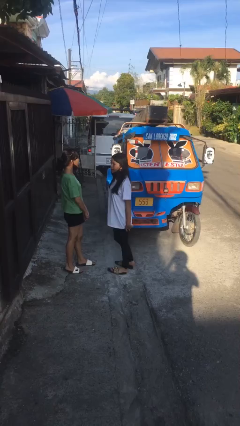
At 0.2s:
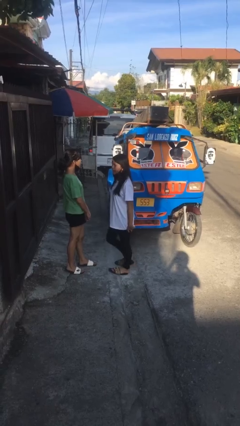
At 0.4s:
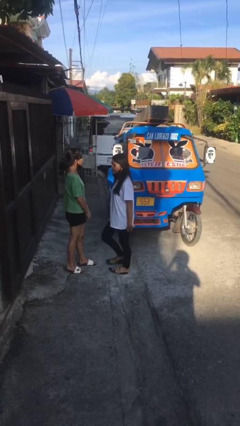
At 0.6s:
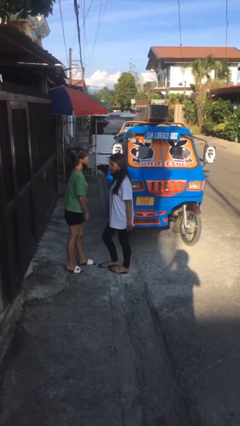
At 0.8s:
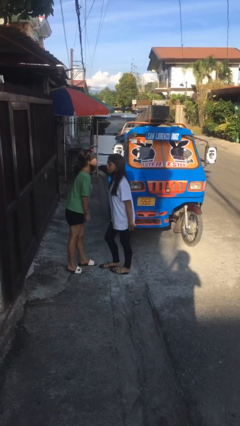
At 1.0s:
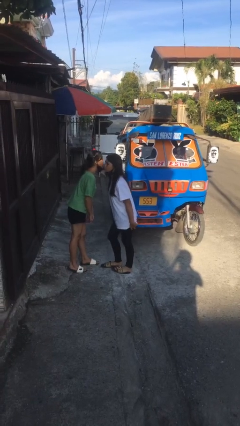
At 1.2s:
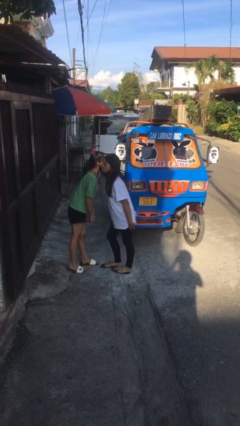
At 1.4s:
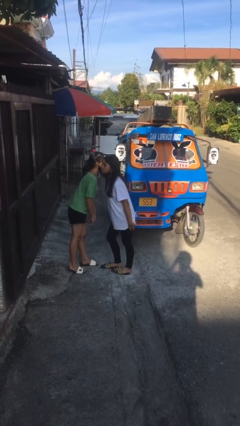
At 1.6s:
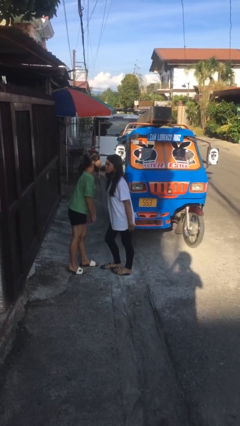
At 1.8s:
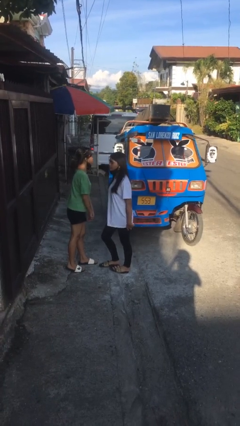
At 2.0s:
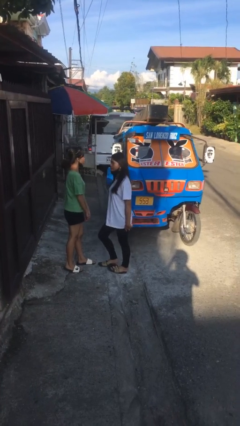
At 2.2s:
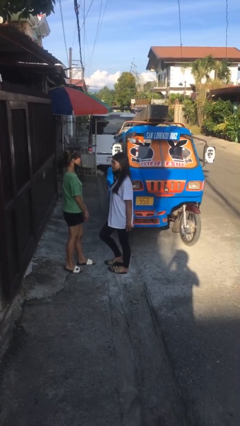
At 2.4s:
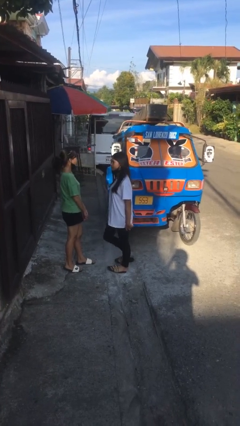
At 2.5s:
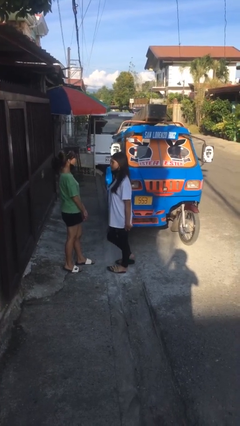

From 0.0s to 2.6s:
person kisses cheek of person

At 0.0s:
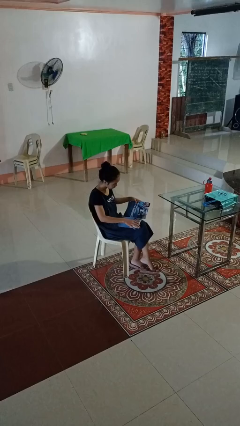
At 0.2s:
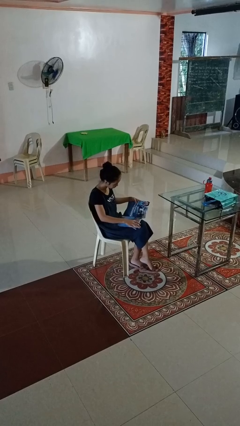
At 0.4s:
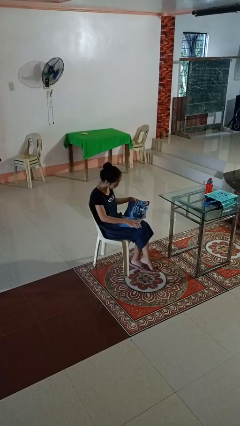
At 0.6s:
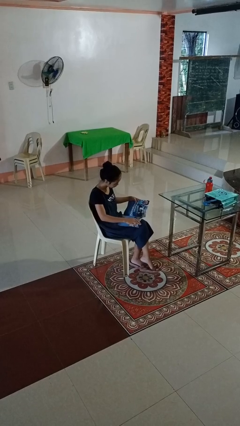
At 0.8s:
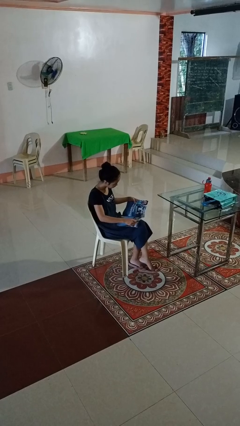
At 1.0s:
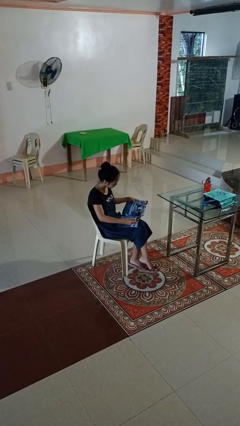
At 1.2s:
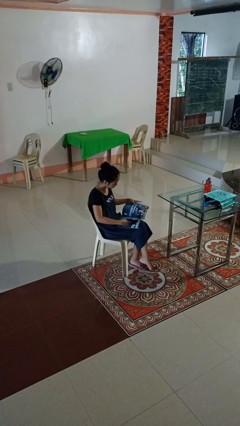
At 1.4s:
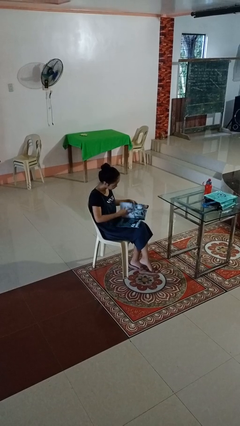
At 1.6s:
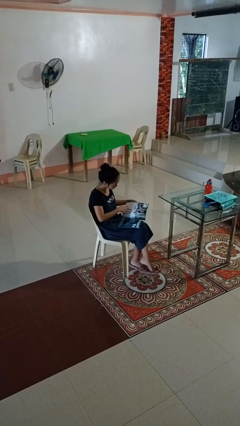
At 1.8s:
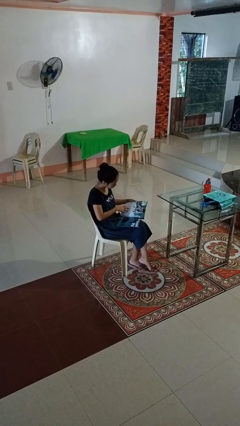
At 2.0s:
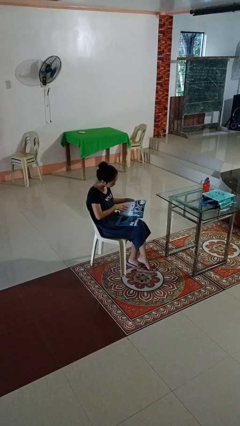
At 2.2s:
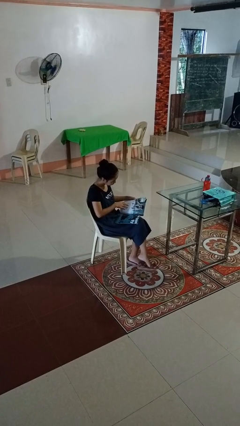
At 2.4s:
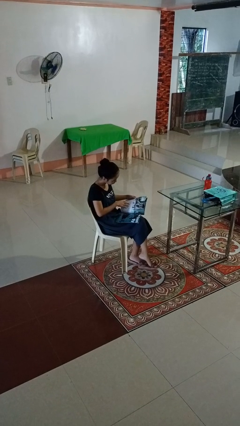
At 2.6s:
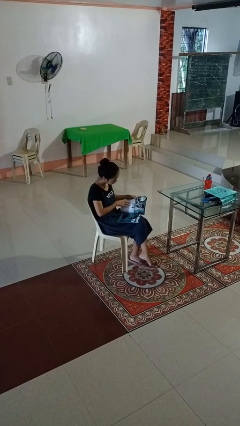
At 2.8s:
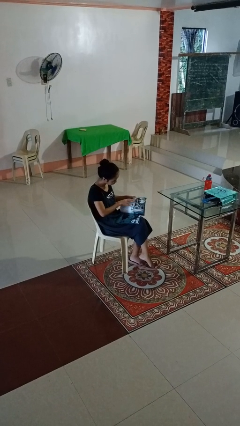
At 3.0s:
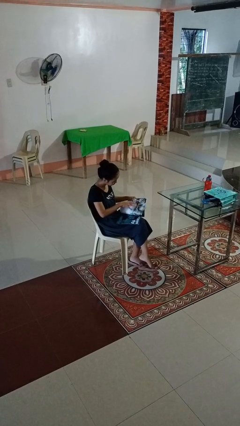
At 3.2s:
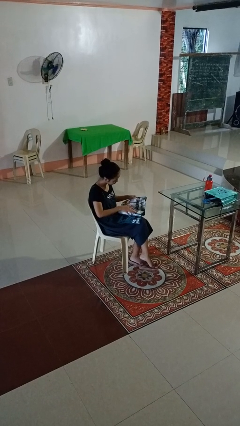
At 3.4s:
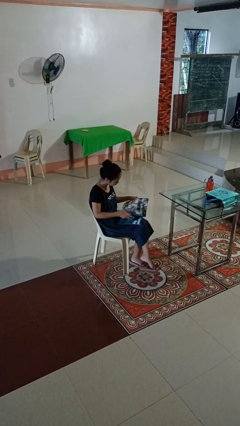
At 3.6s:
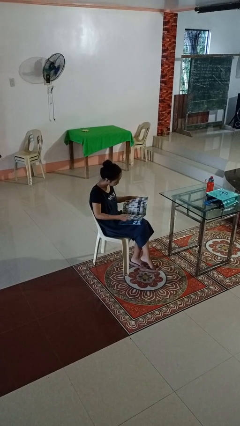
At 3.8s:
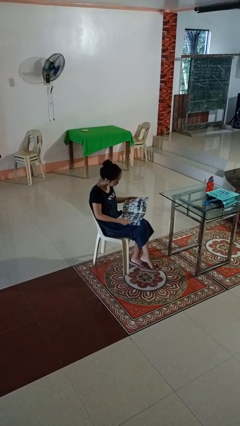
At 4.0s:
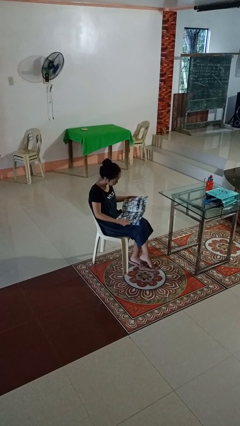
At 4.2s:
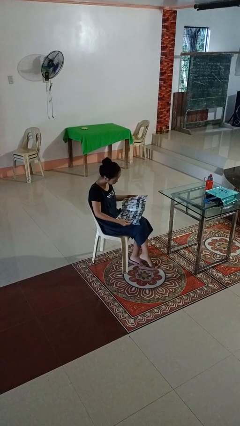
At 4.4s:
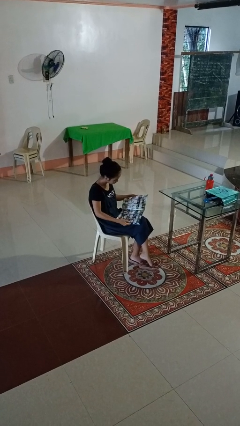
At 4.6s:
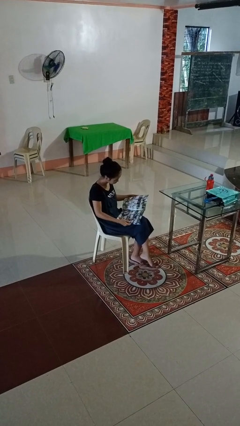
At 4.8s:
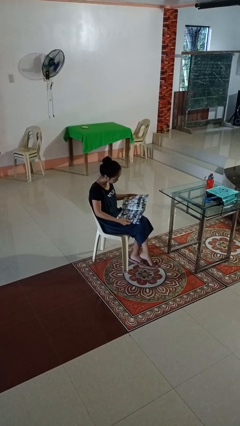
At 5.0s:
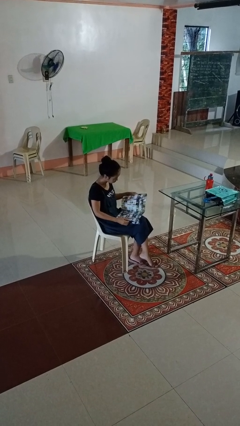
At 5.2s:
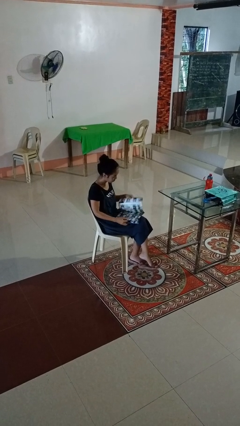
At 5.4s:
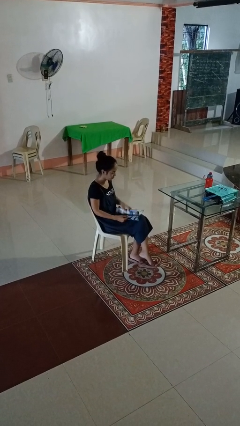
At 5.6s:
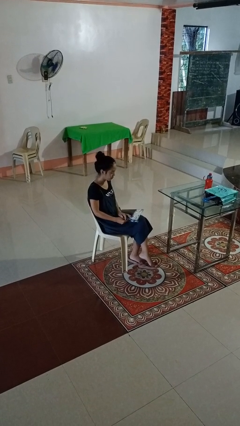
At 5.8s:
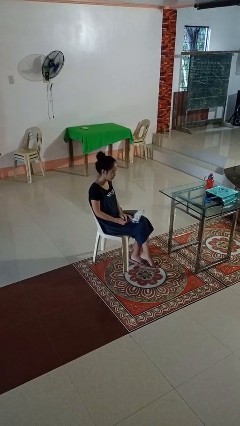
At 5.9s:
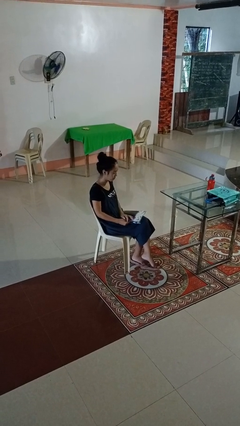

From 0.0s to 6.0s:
person reads magazine

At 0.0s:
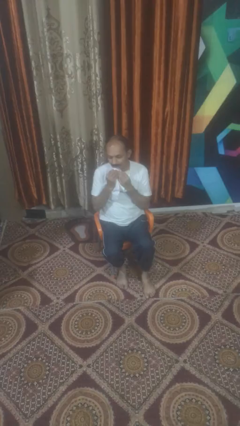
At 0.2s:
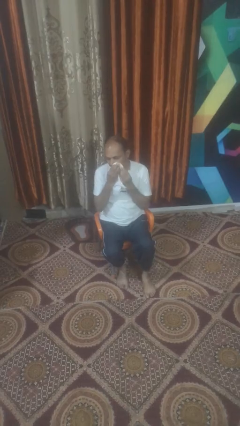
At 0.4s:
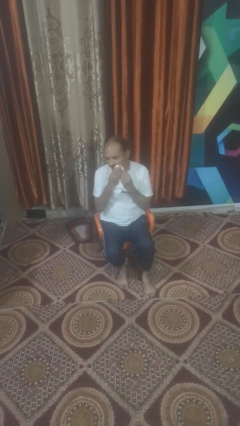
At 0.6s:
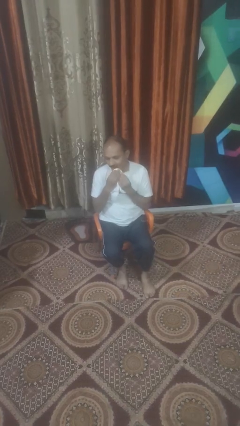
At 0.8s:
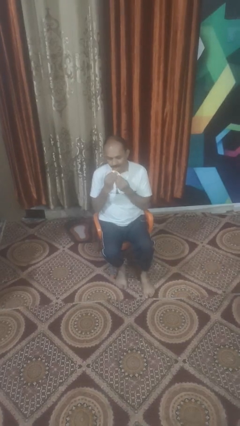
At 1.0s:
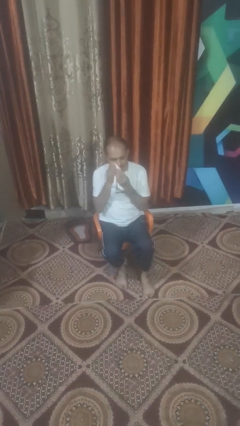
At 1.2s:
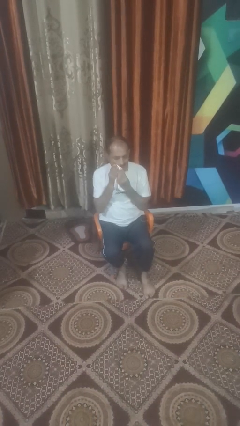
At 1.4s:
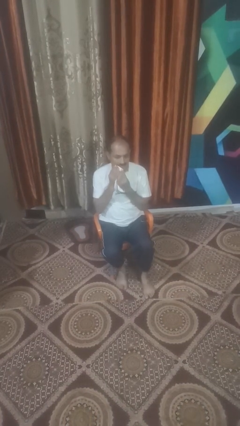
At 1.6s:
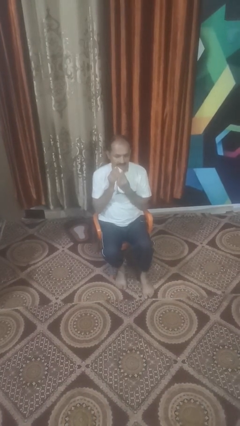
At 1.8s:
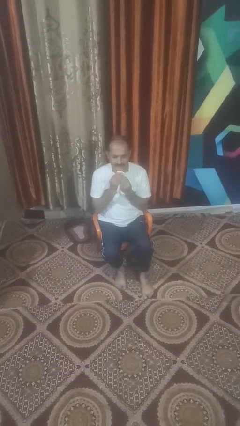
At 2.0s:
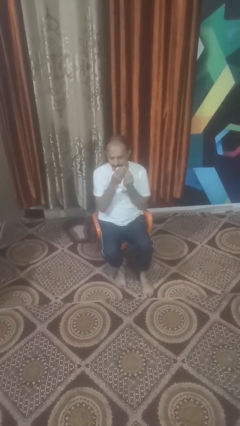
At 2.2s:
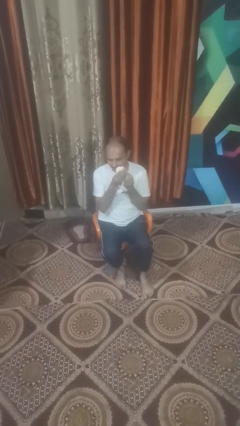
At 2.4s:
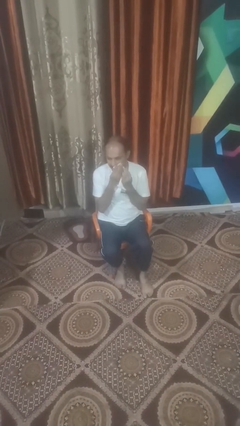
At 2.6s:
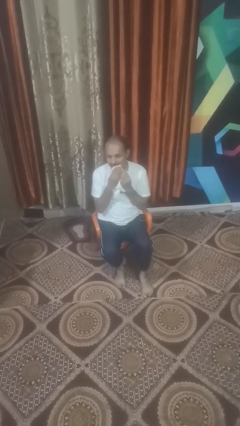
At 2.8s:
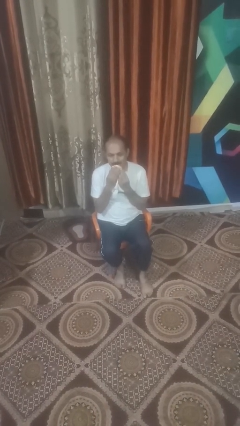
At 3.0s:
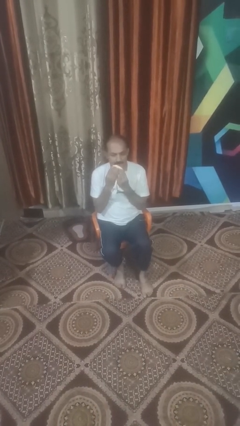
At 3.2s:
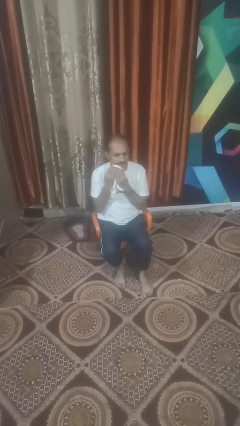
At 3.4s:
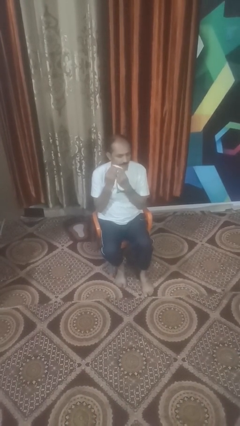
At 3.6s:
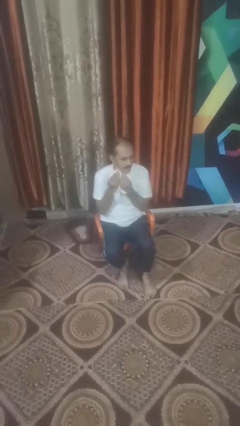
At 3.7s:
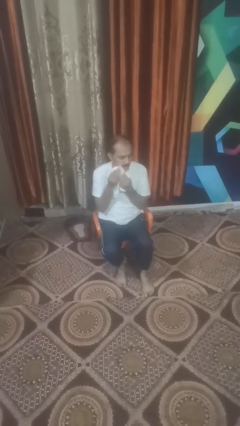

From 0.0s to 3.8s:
person wipes mouth with napkin

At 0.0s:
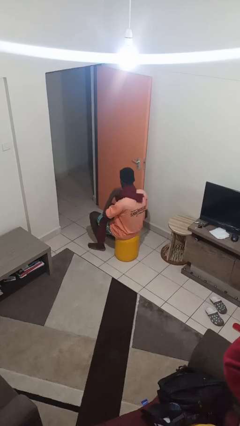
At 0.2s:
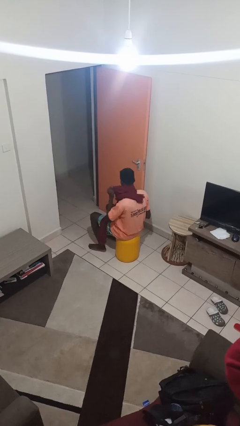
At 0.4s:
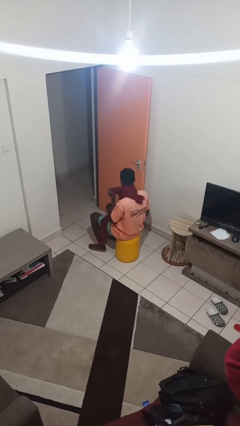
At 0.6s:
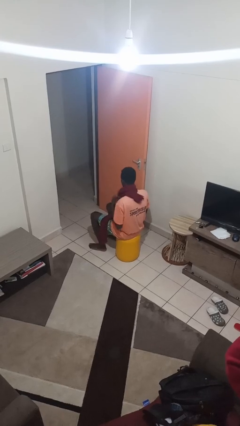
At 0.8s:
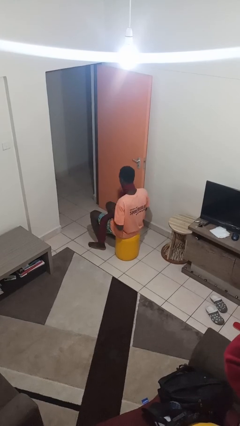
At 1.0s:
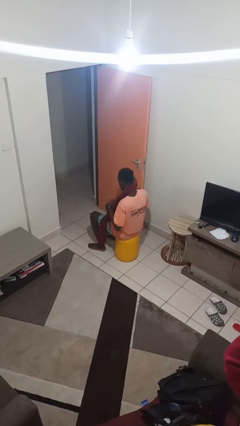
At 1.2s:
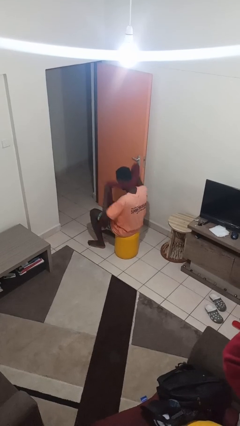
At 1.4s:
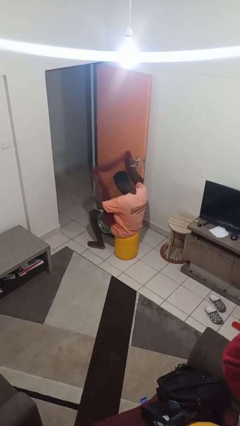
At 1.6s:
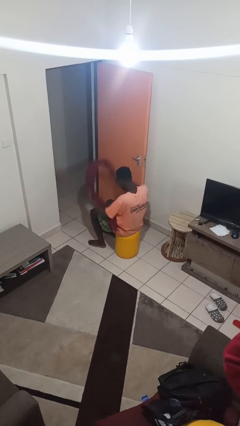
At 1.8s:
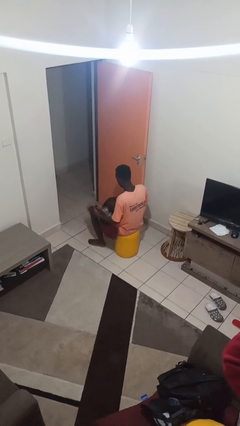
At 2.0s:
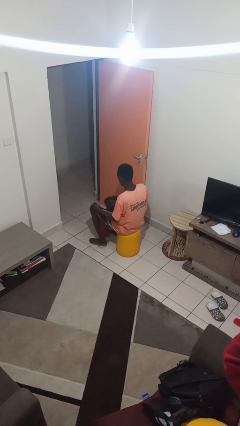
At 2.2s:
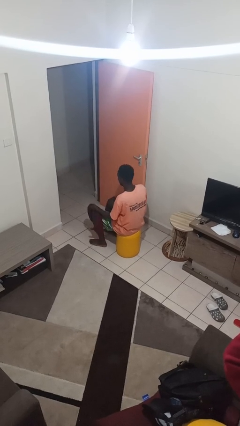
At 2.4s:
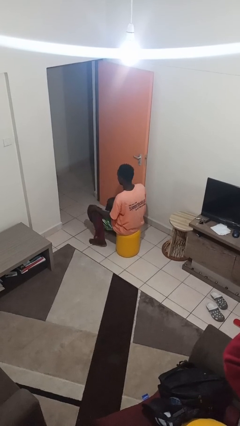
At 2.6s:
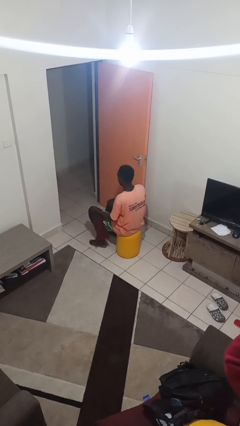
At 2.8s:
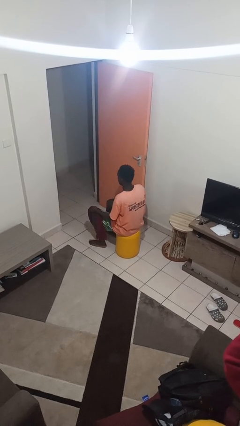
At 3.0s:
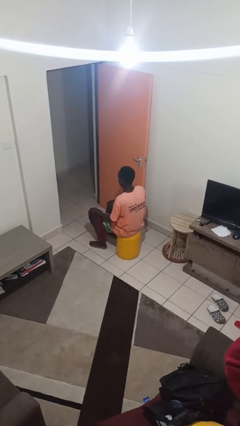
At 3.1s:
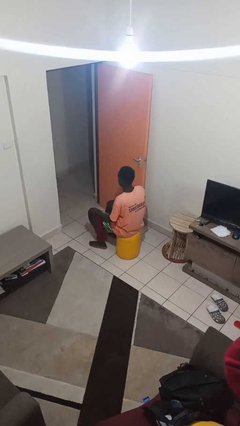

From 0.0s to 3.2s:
person takes off scarf

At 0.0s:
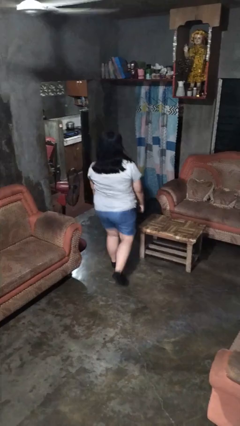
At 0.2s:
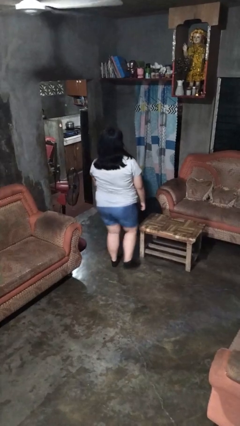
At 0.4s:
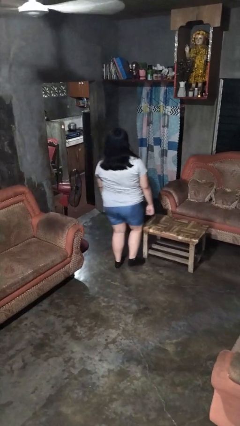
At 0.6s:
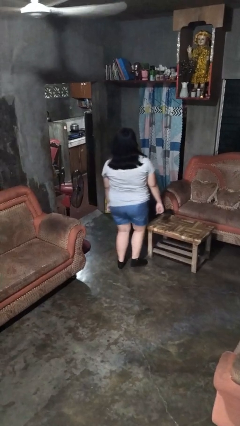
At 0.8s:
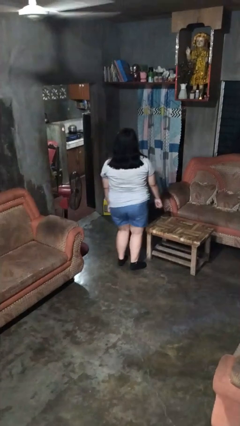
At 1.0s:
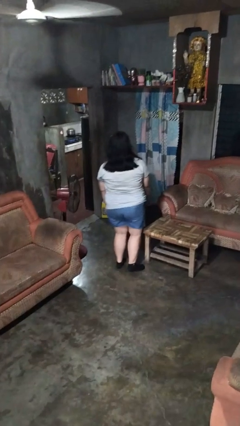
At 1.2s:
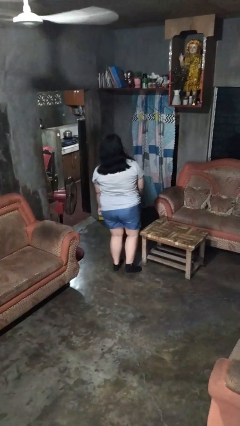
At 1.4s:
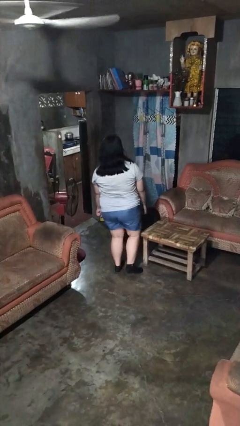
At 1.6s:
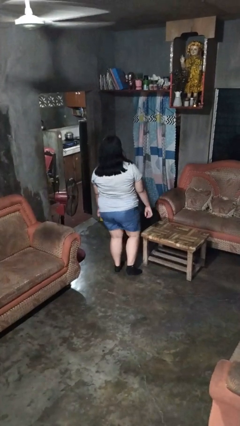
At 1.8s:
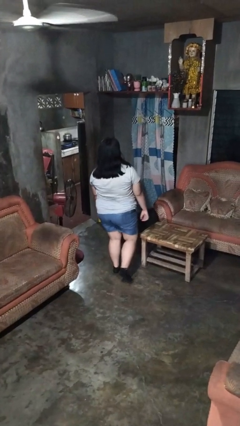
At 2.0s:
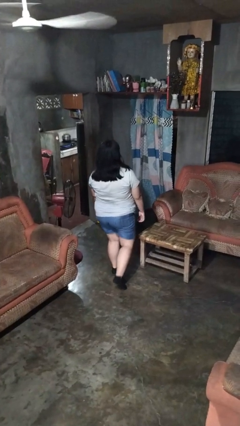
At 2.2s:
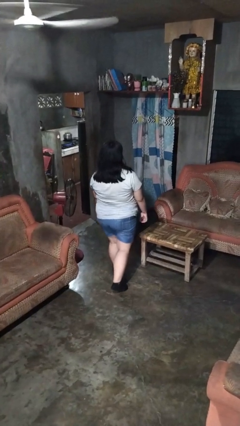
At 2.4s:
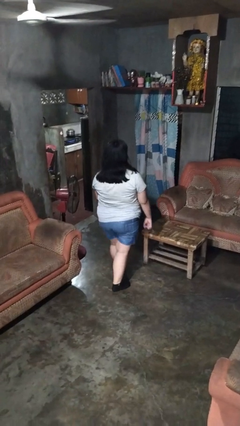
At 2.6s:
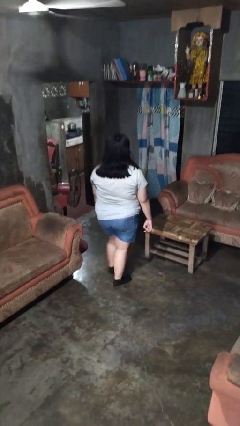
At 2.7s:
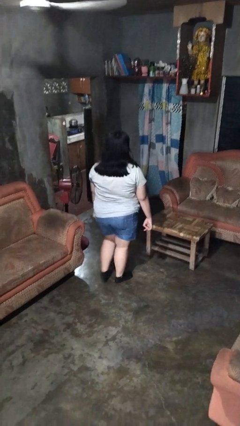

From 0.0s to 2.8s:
person bumps into table
